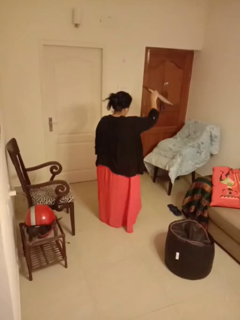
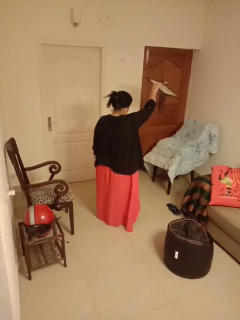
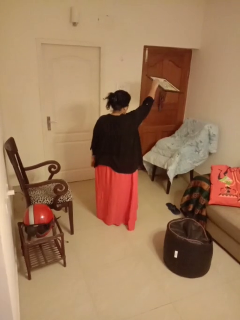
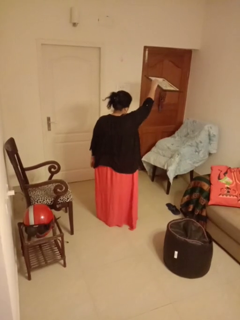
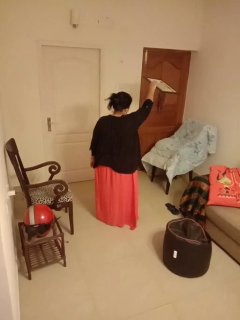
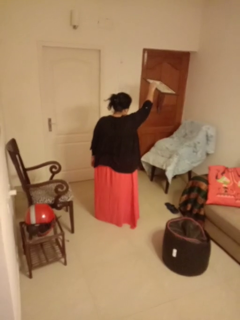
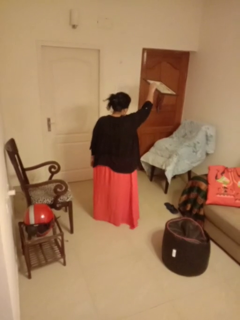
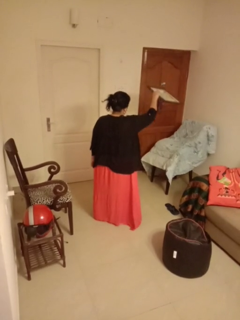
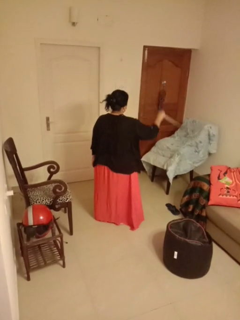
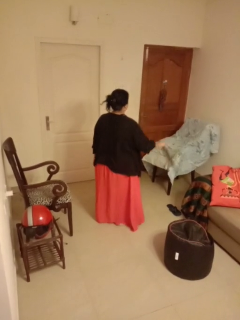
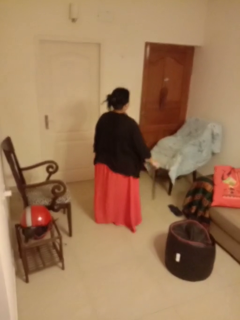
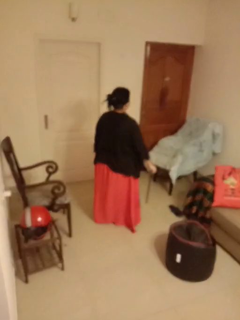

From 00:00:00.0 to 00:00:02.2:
person holds object above head

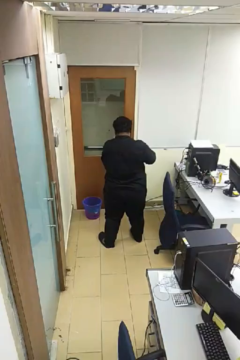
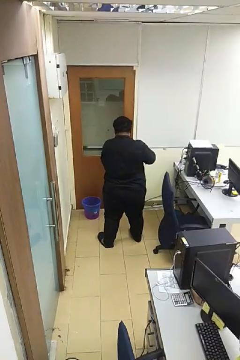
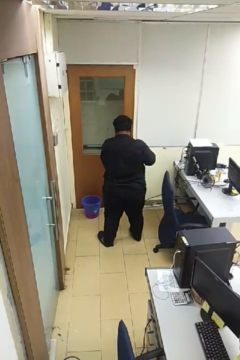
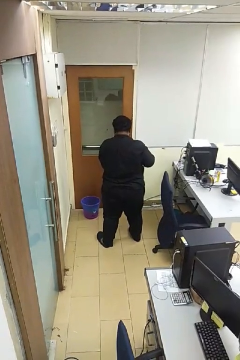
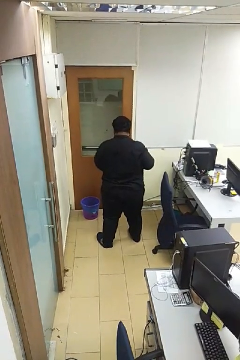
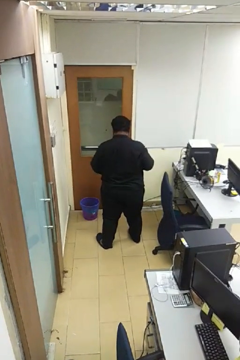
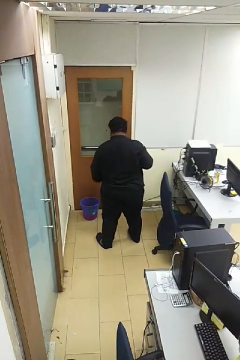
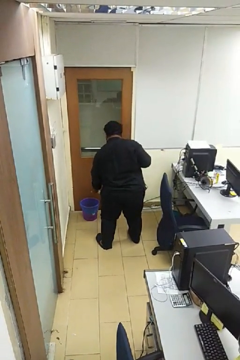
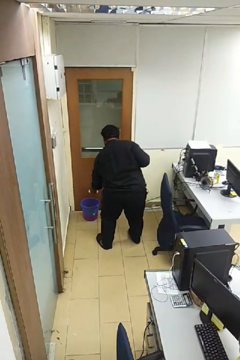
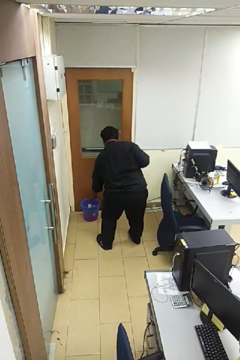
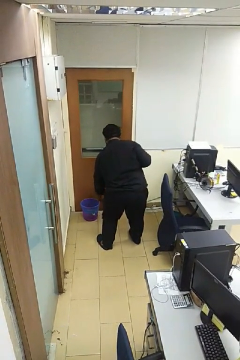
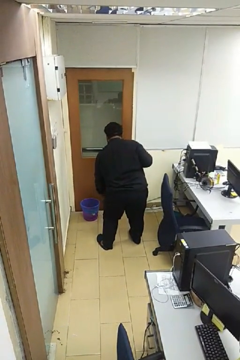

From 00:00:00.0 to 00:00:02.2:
person discards trash

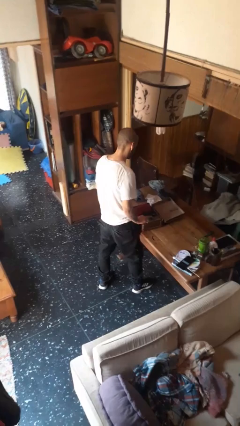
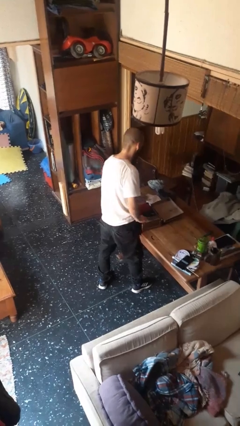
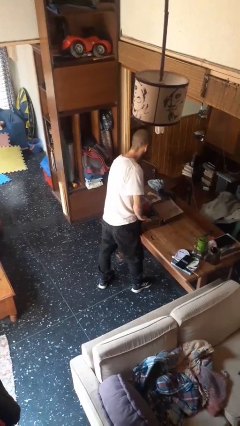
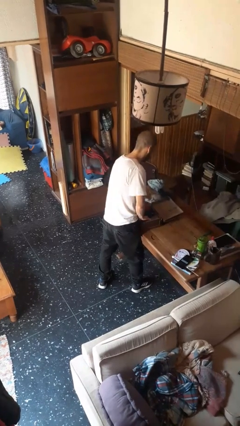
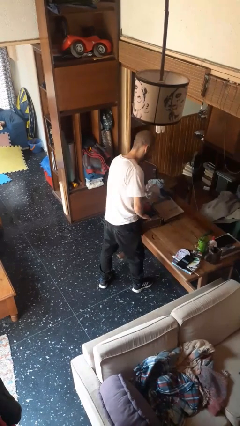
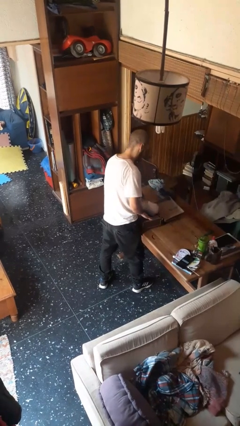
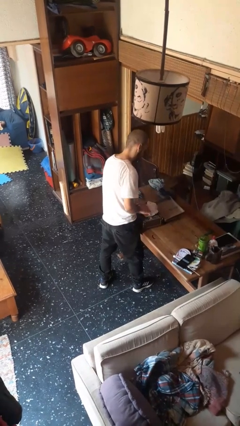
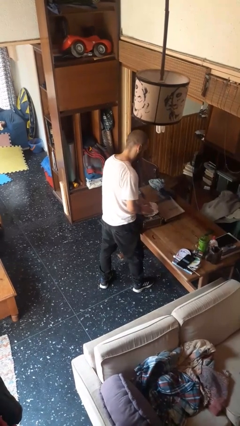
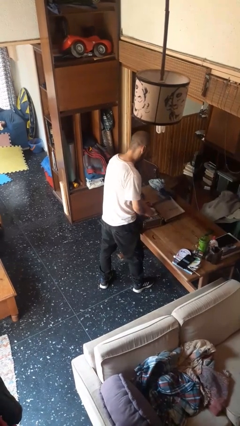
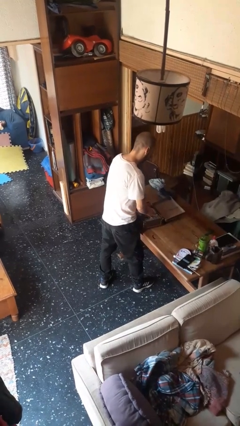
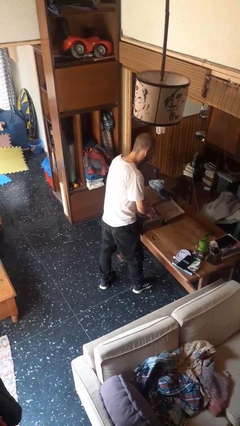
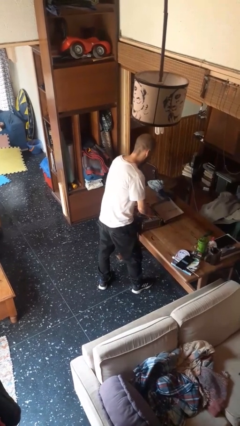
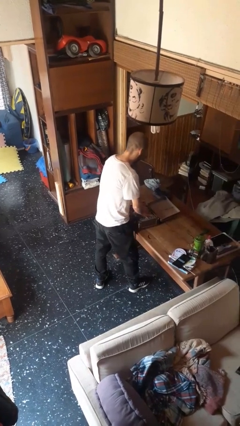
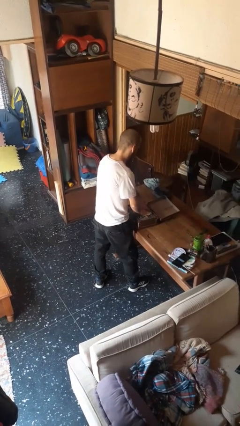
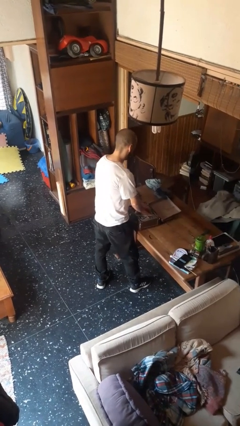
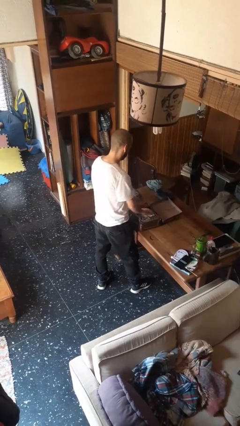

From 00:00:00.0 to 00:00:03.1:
person loads clothes into suitcase

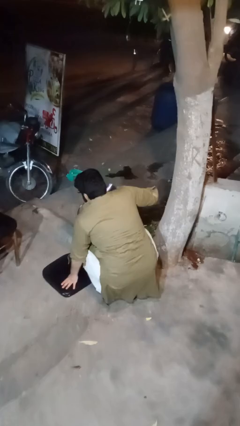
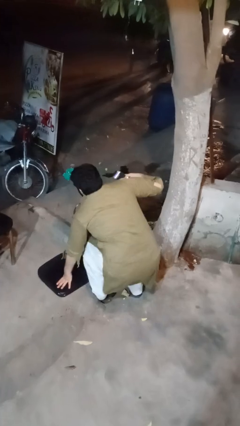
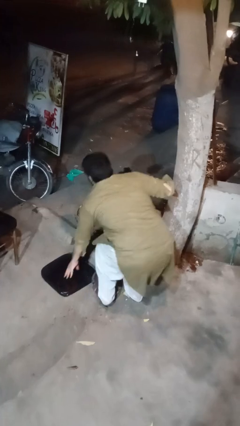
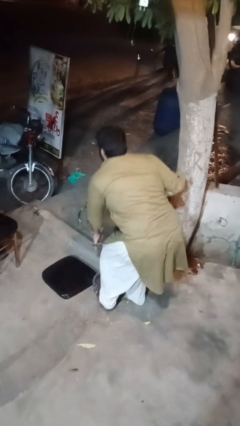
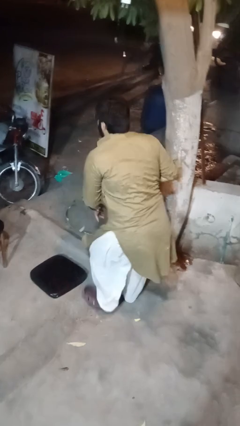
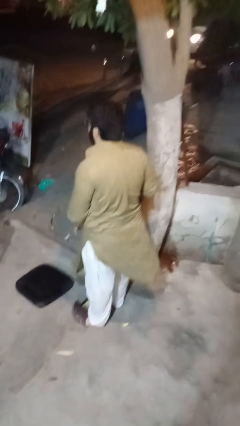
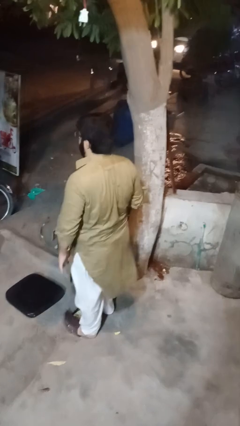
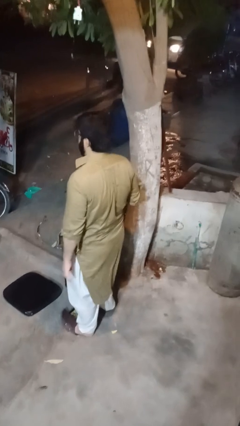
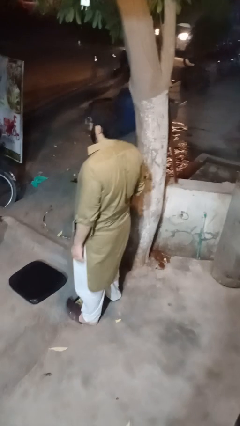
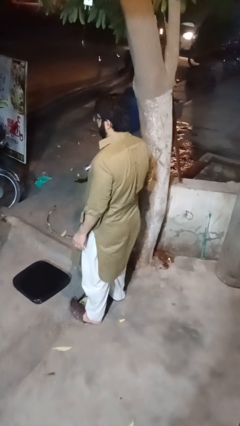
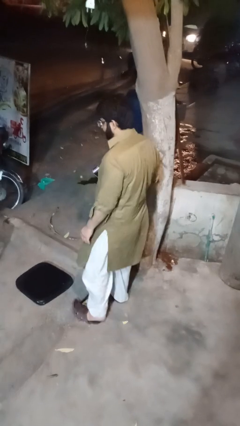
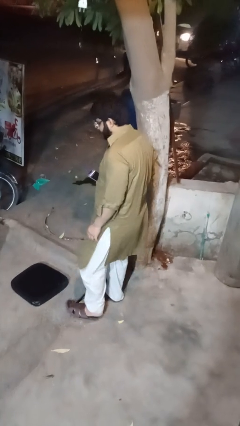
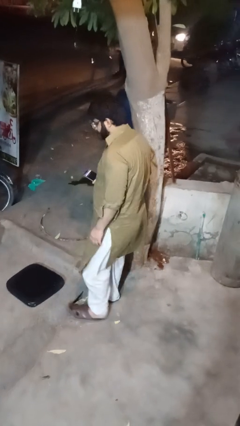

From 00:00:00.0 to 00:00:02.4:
person stands up from floor

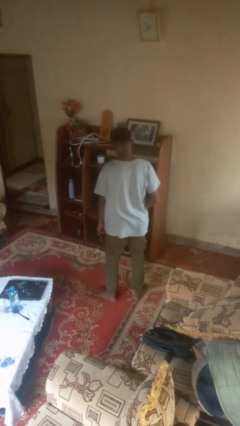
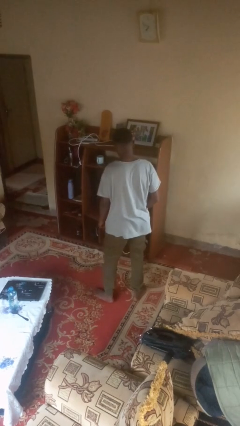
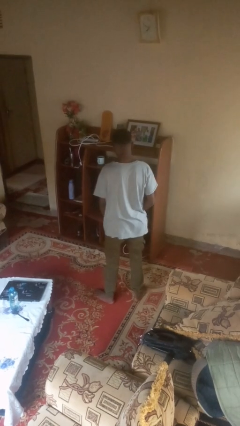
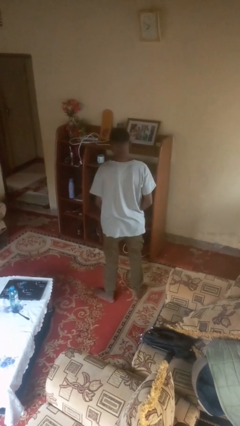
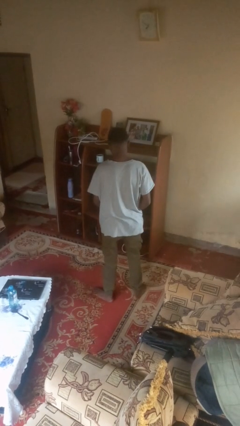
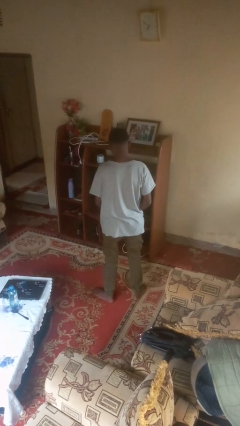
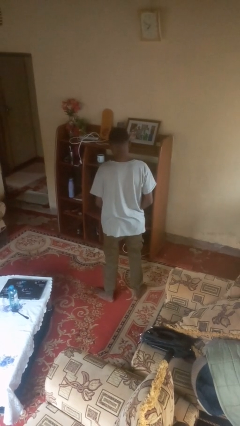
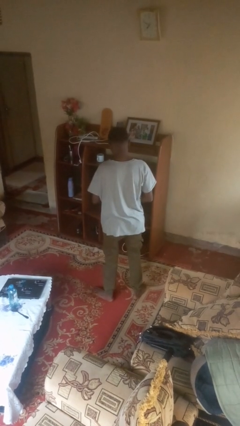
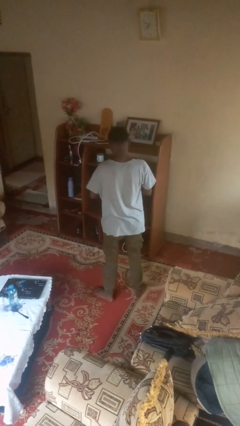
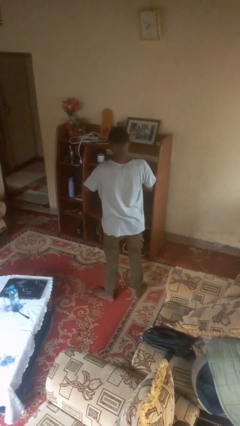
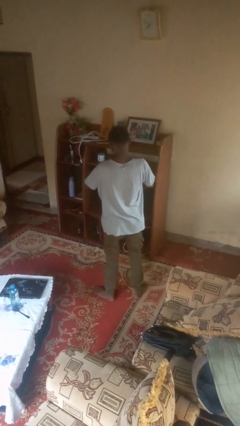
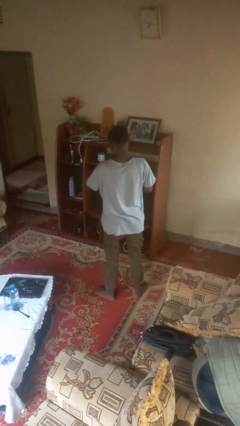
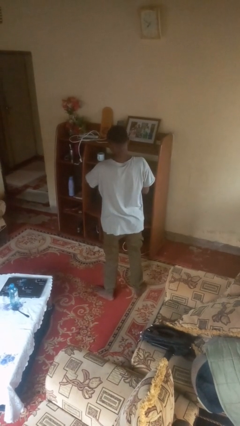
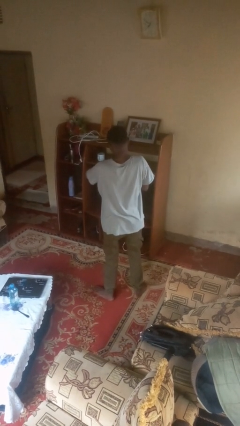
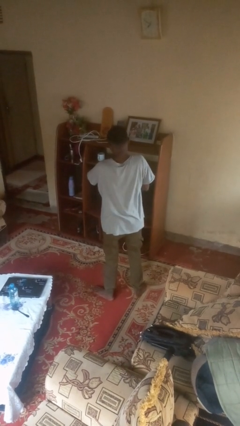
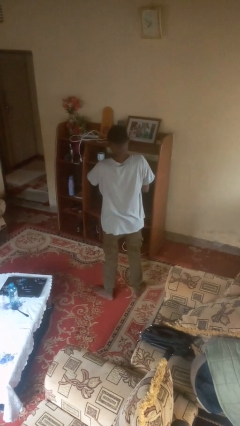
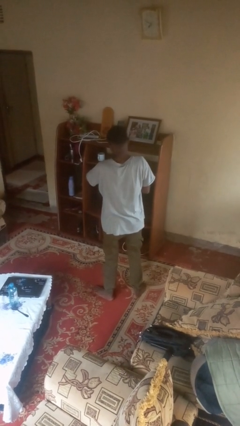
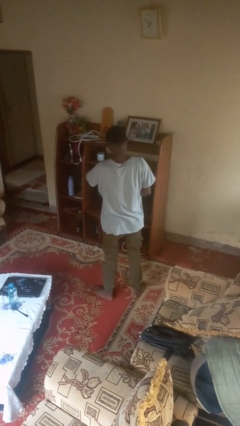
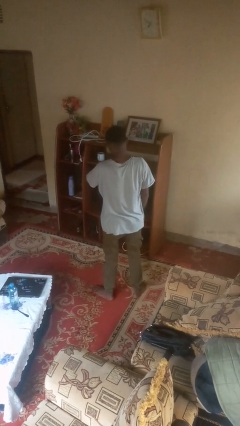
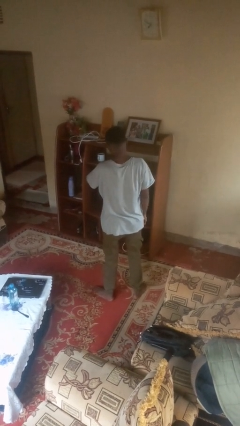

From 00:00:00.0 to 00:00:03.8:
person puts on wristwatch

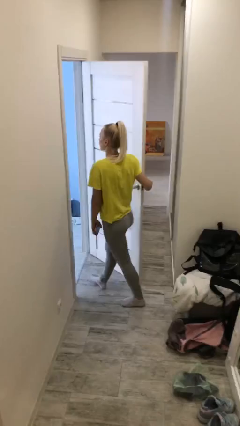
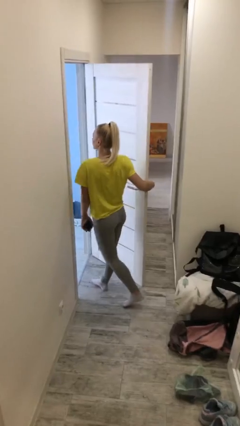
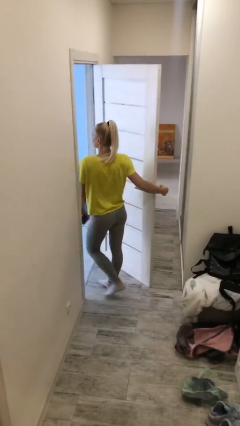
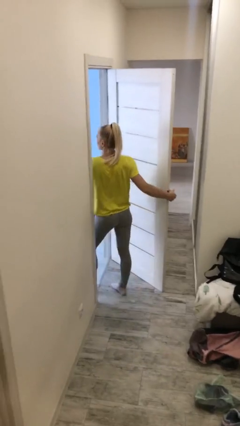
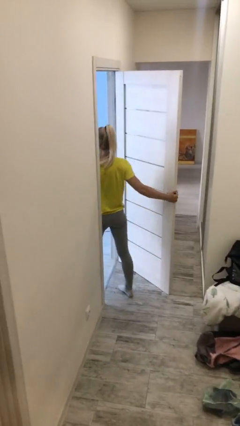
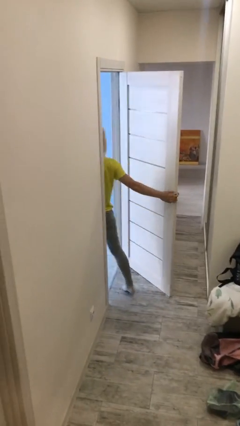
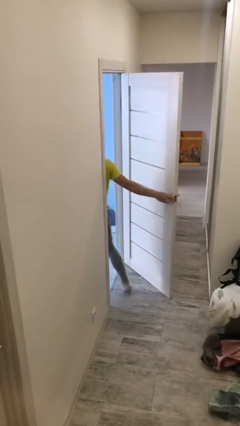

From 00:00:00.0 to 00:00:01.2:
person exits scene through structure

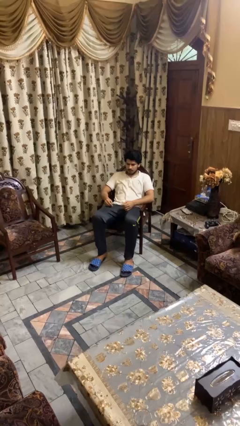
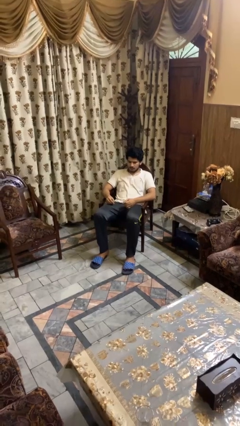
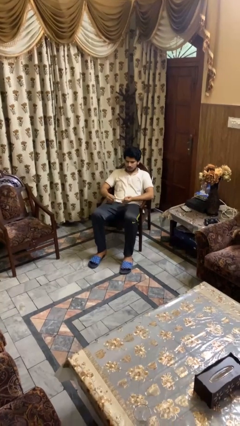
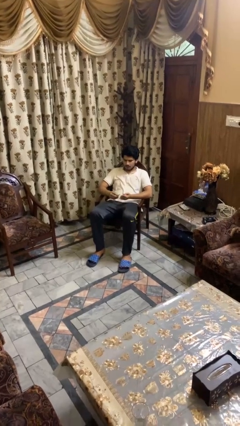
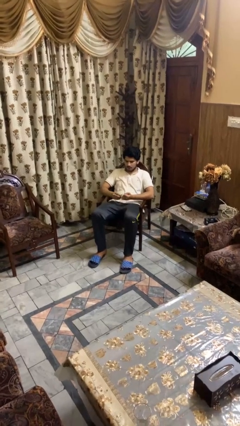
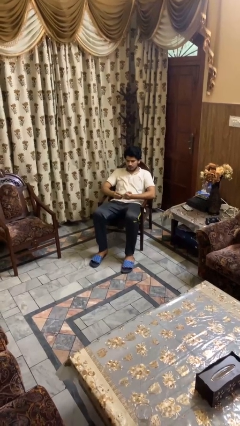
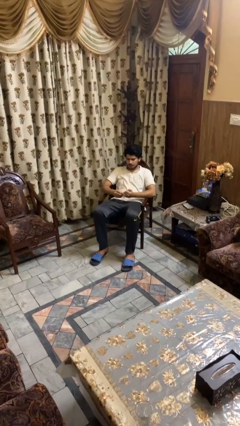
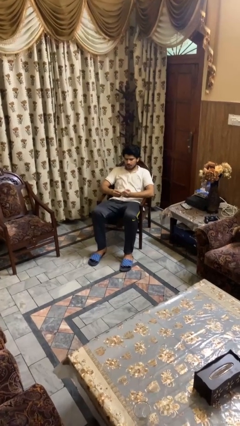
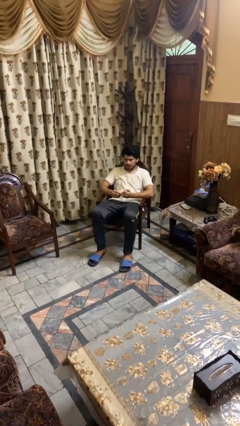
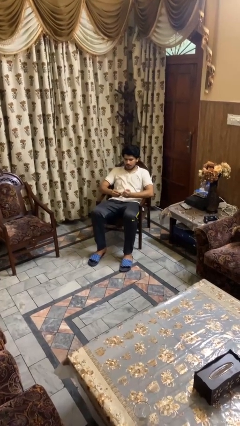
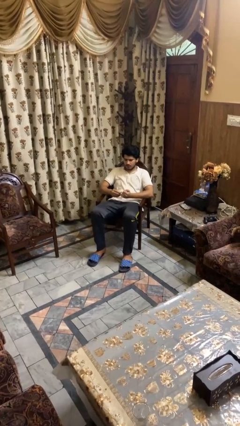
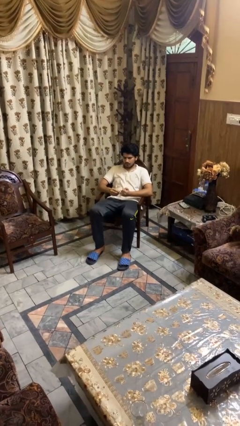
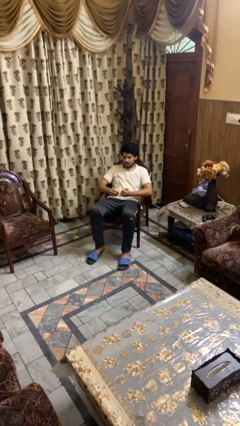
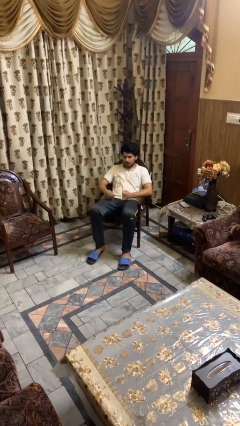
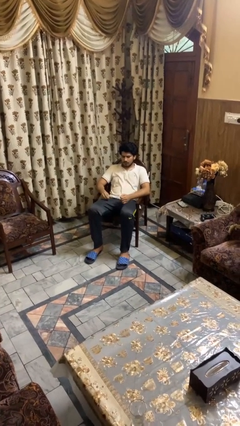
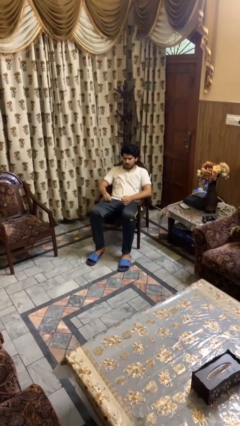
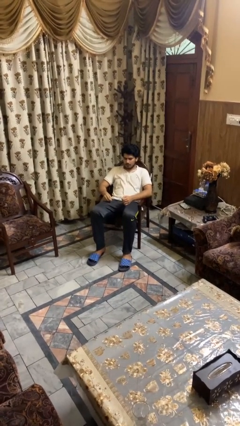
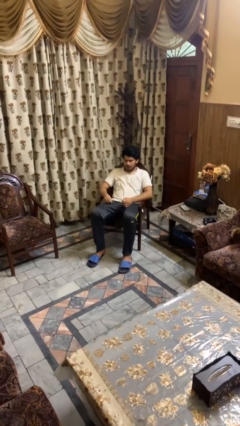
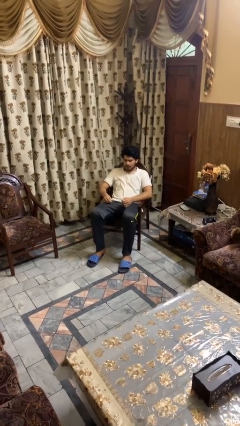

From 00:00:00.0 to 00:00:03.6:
person files fingernails
